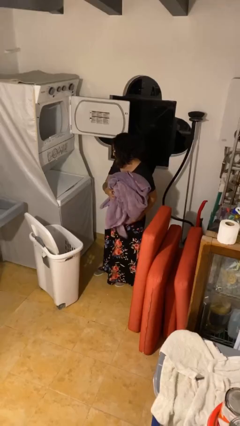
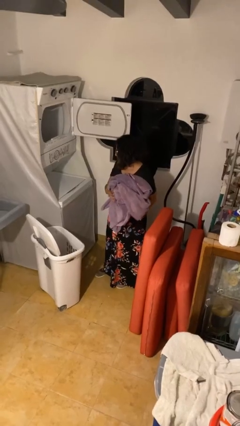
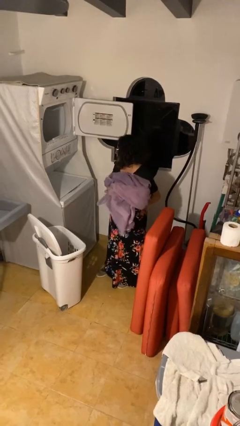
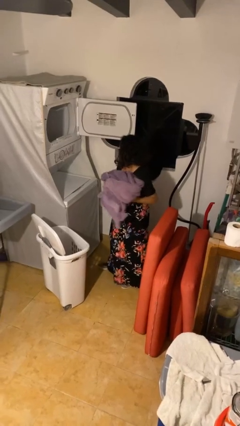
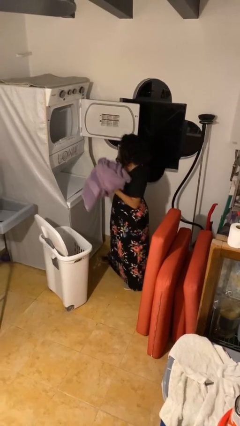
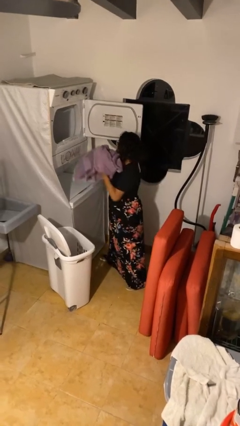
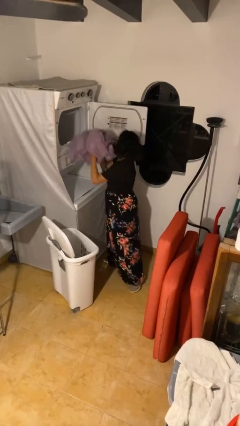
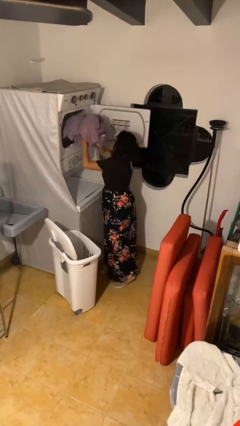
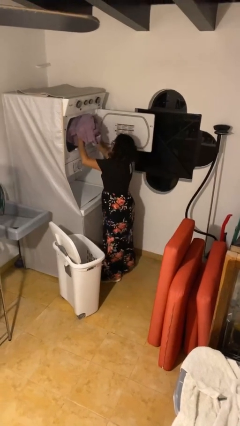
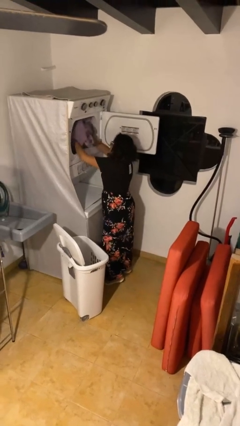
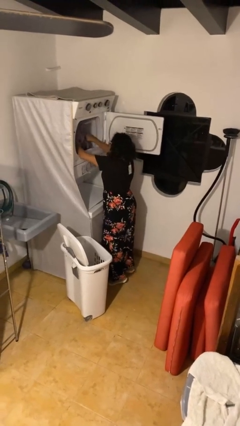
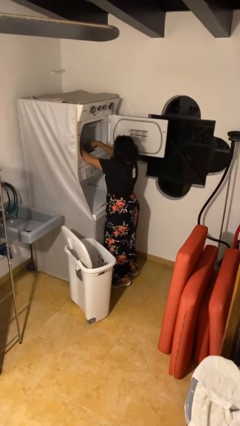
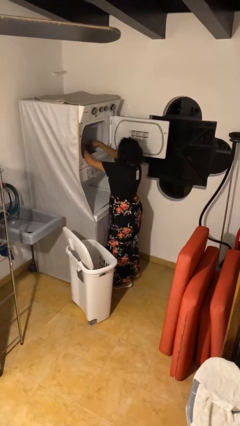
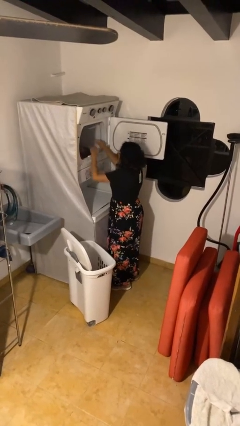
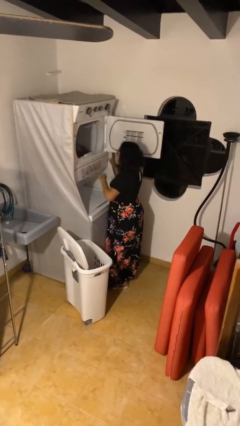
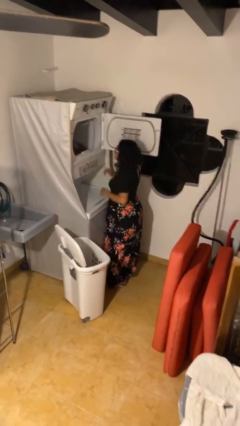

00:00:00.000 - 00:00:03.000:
person loads dryer

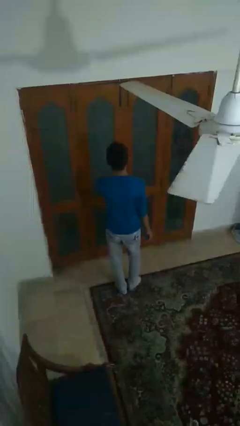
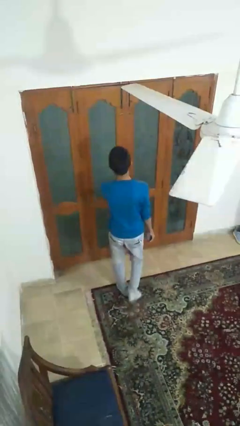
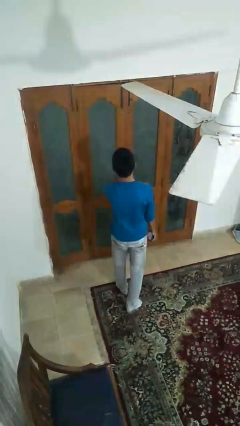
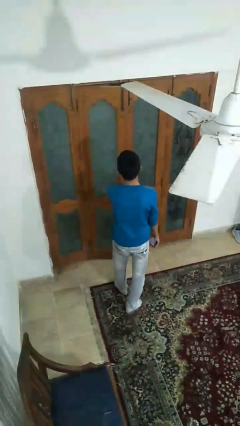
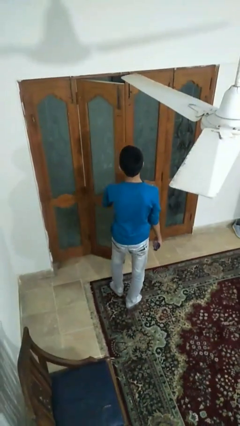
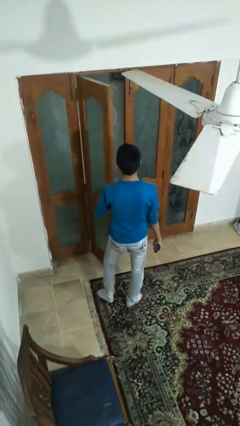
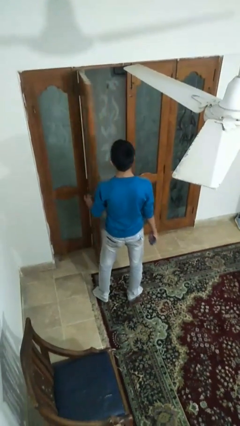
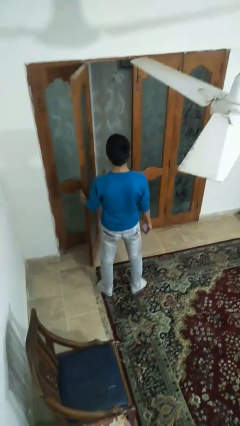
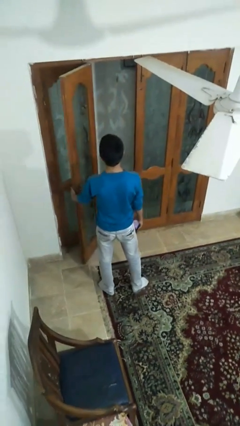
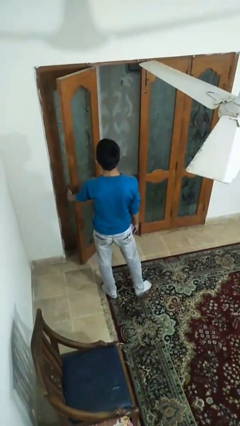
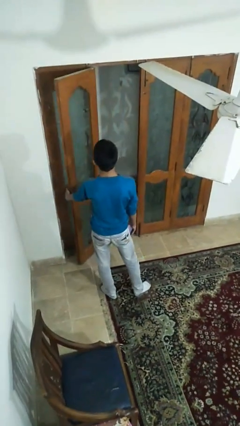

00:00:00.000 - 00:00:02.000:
person opens facility door

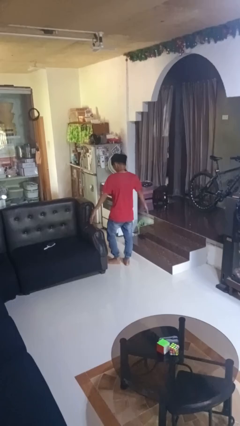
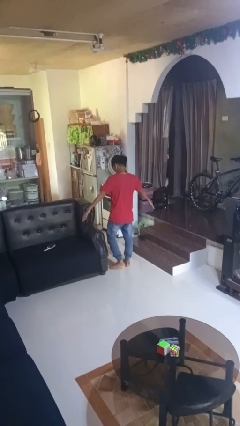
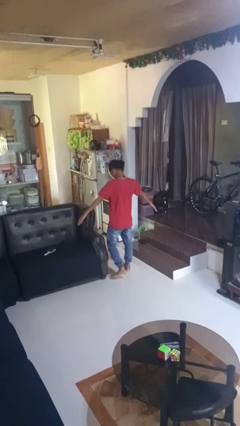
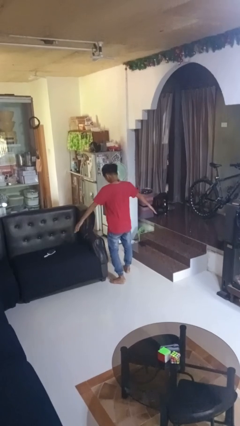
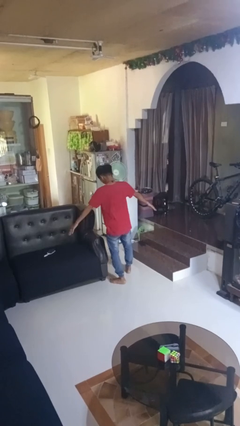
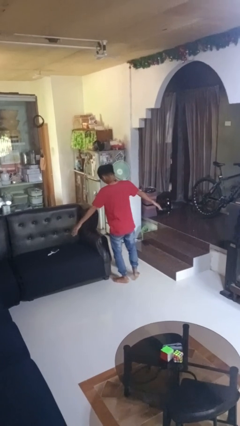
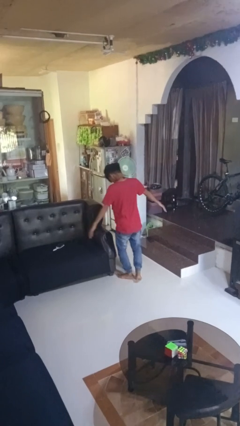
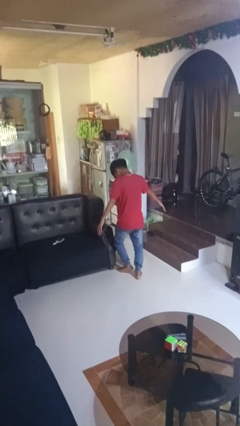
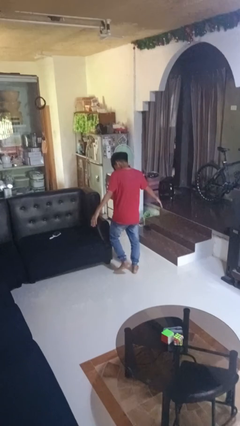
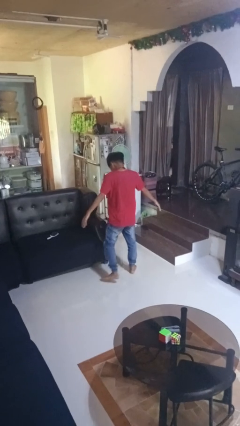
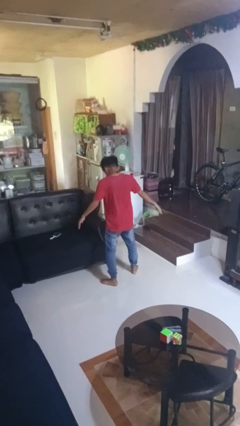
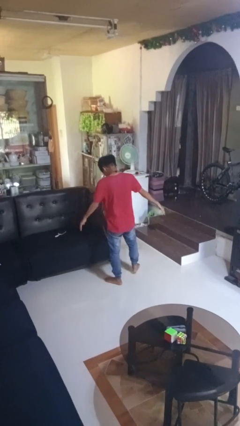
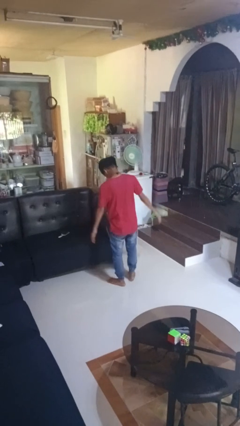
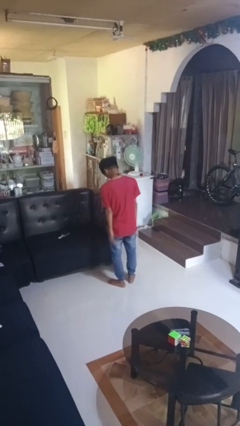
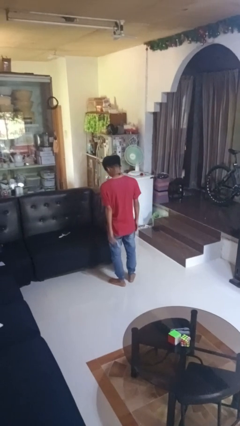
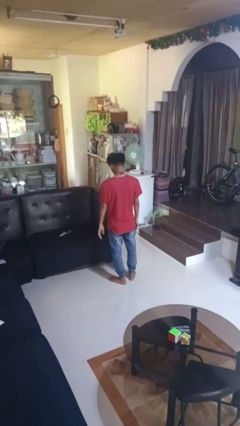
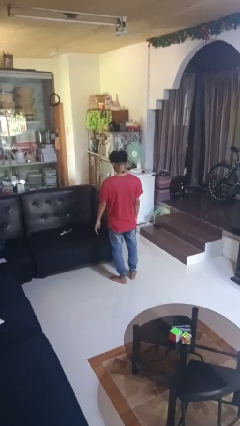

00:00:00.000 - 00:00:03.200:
person walks tiptoe

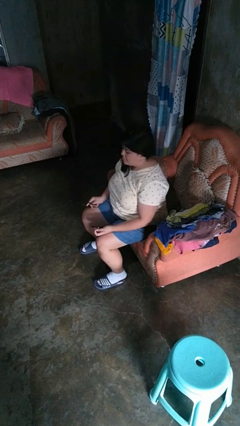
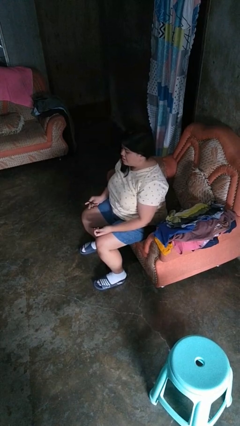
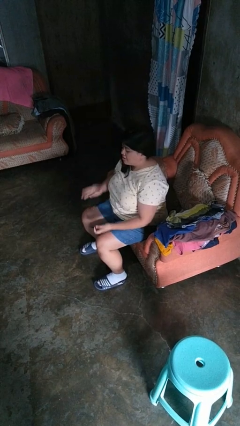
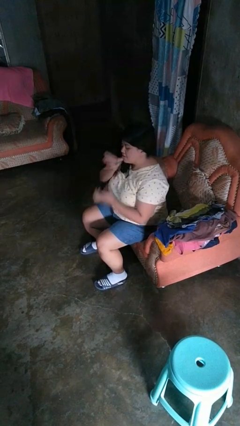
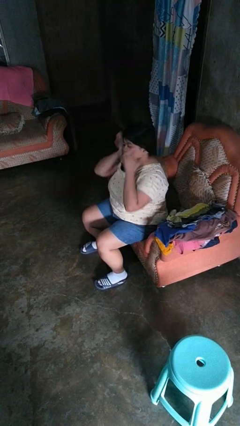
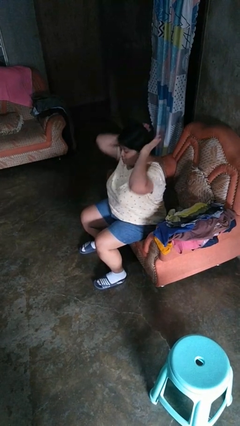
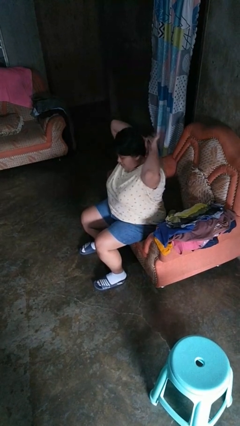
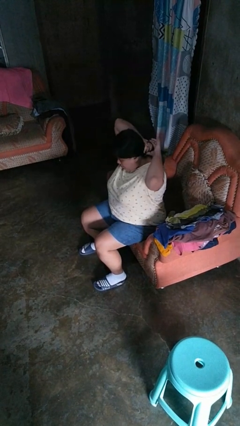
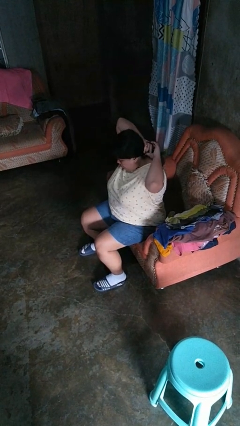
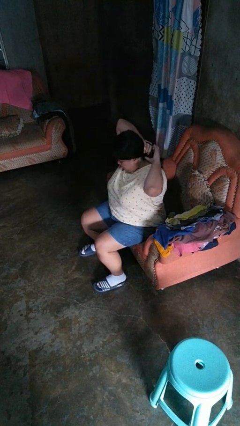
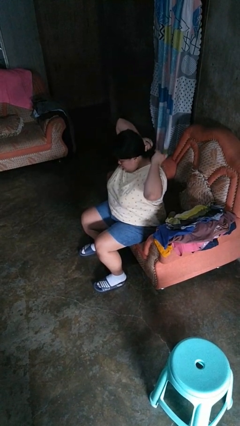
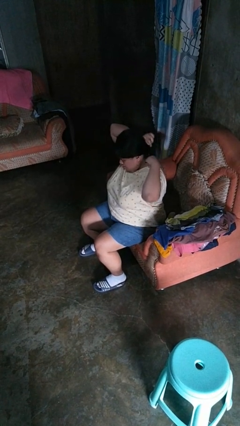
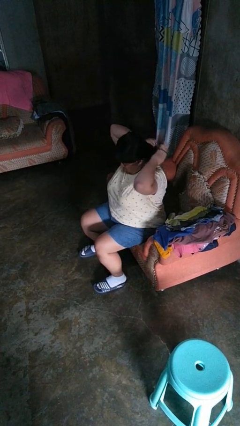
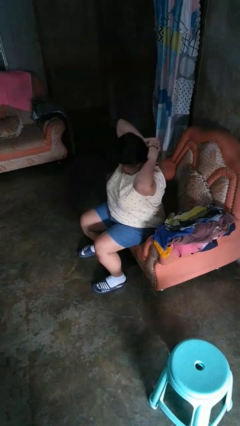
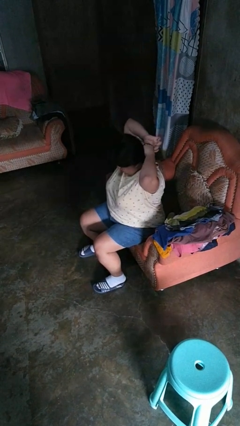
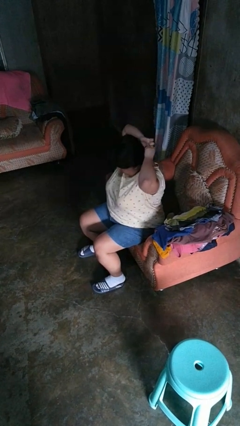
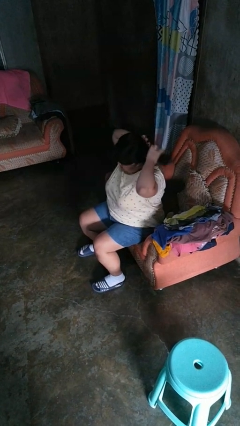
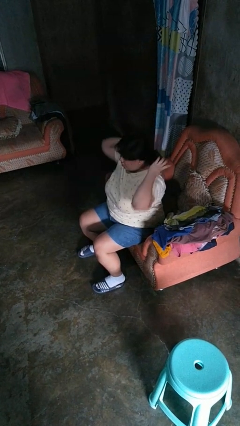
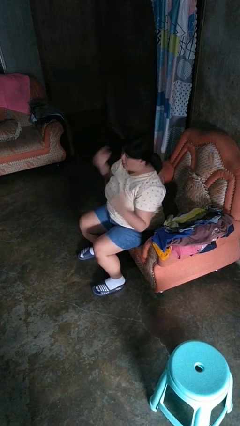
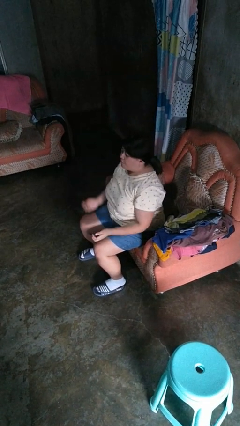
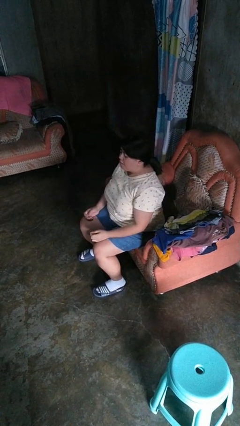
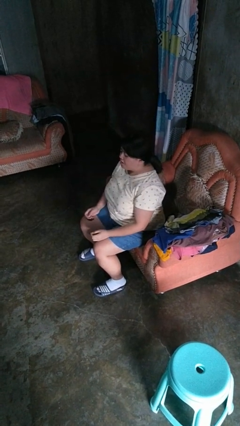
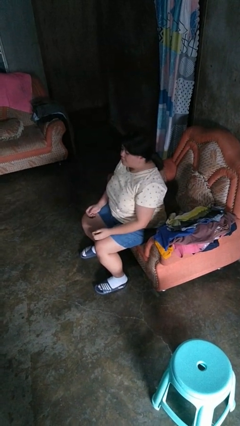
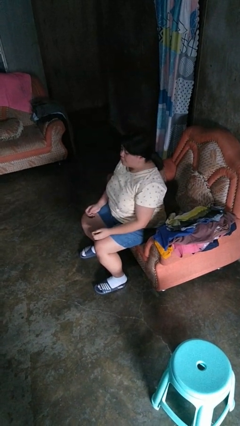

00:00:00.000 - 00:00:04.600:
person puts hair in ponytail

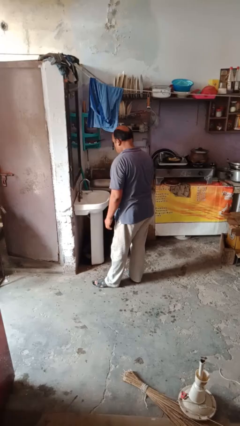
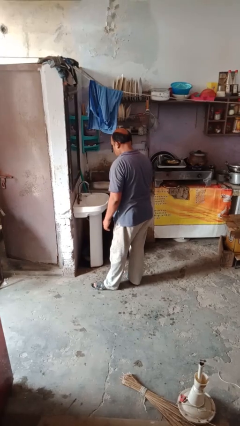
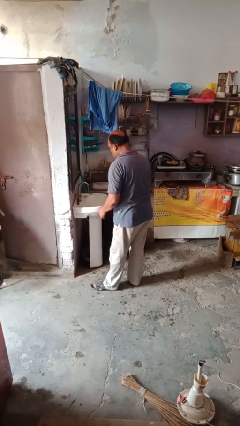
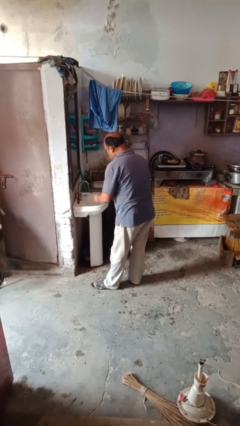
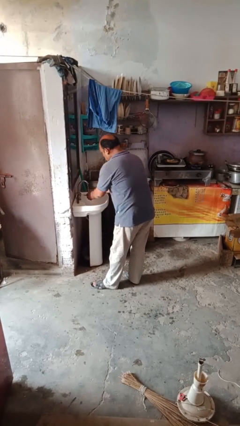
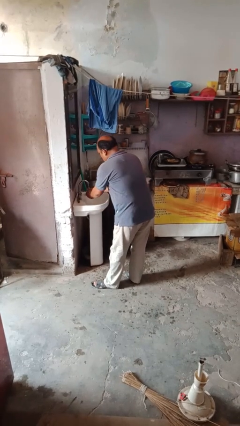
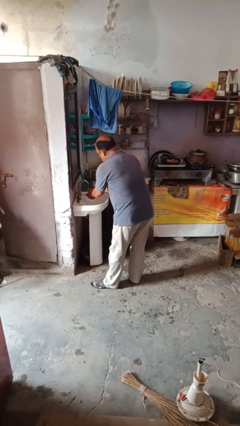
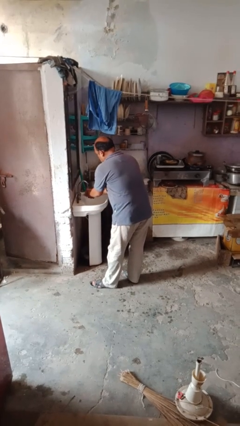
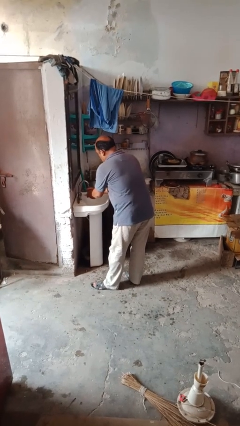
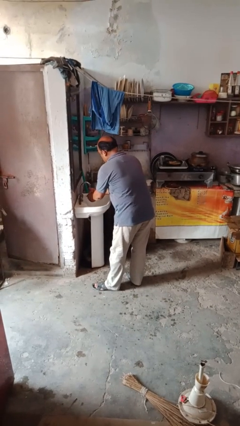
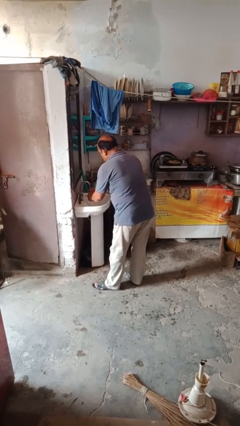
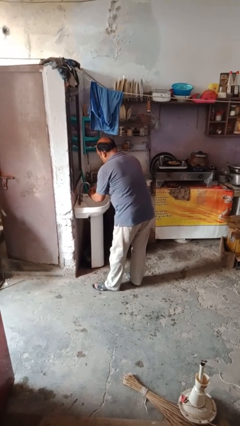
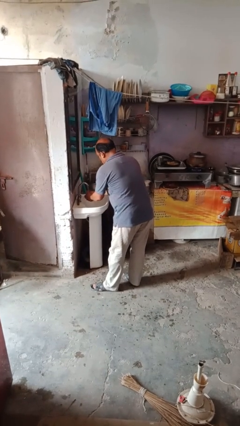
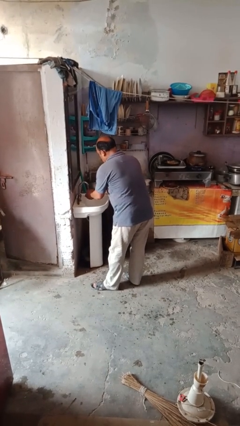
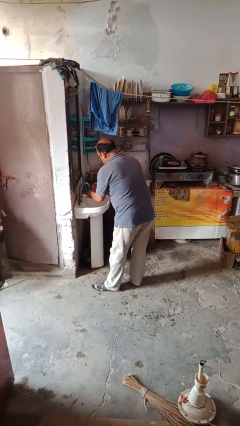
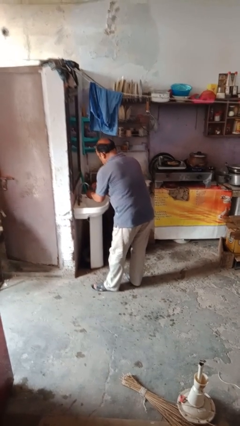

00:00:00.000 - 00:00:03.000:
person washes hands

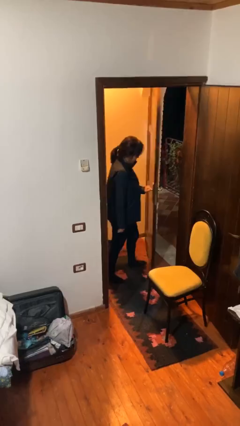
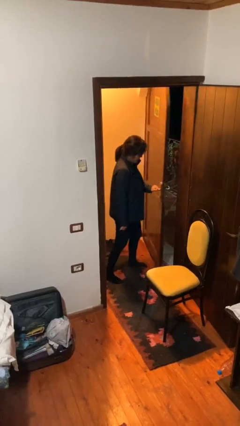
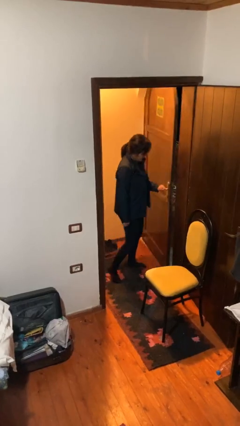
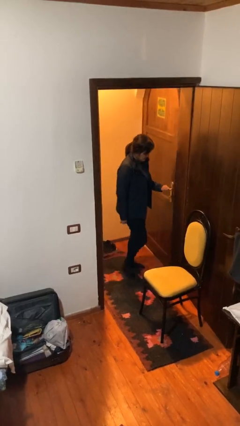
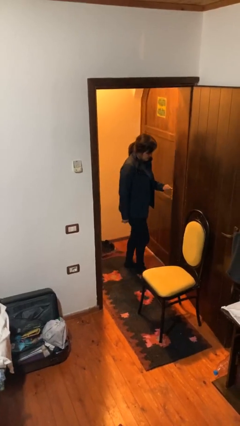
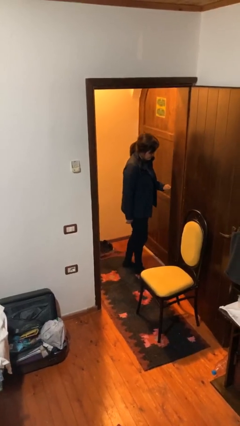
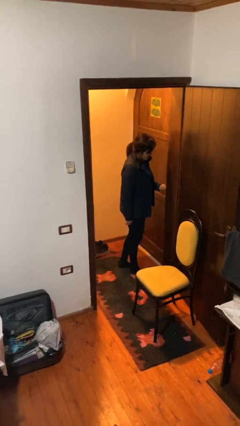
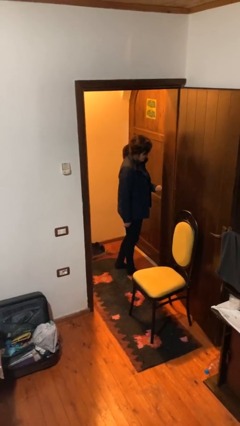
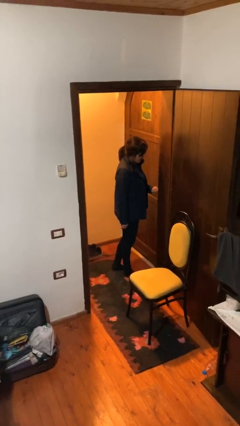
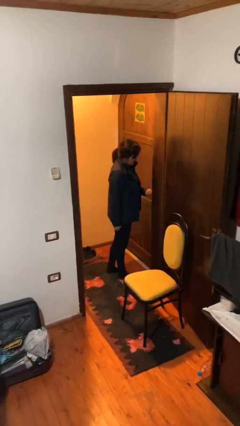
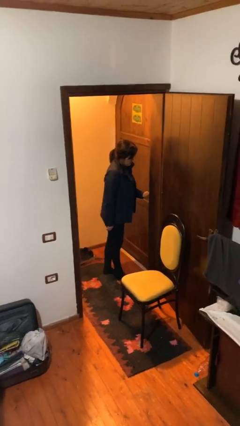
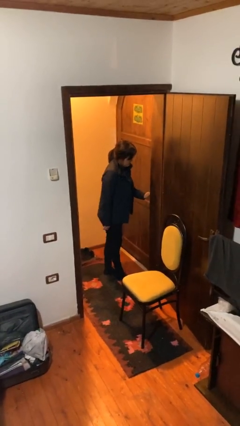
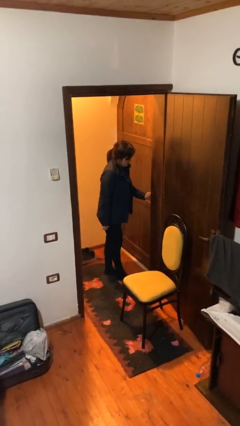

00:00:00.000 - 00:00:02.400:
person closes facility door
